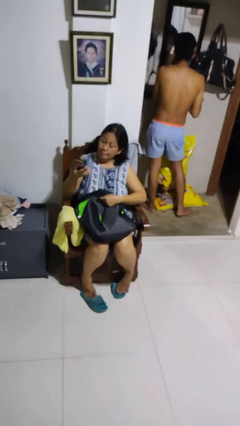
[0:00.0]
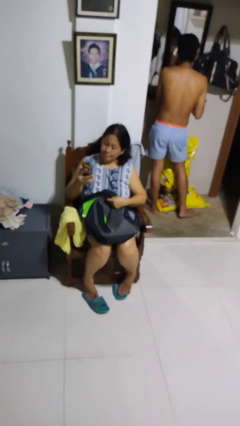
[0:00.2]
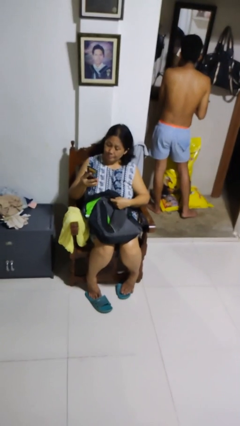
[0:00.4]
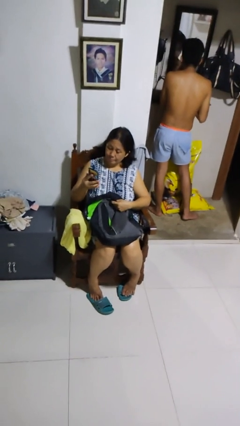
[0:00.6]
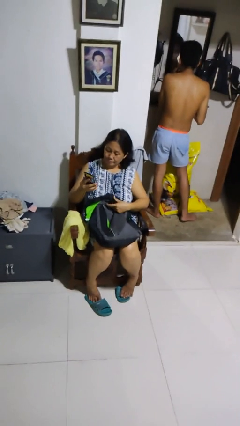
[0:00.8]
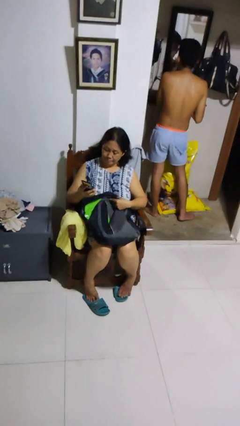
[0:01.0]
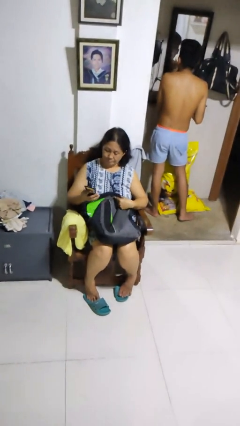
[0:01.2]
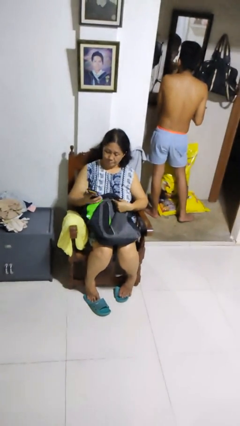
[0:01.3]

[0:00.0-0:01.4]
person takes object from backpack

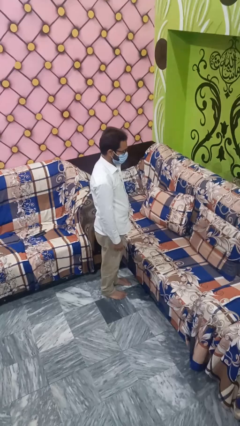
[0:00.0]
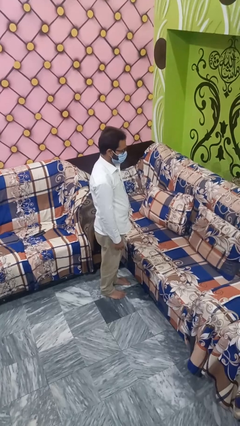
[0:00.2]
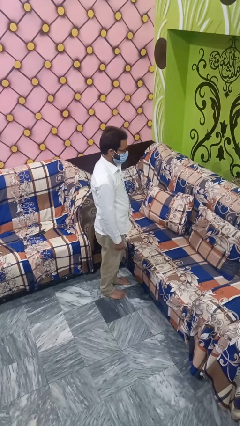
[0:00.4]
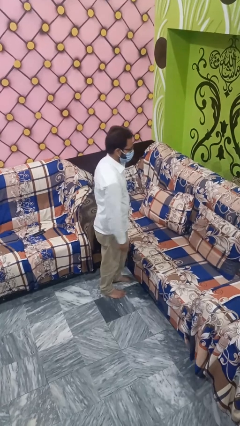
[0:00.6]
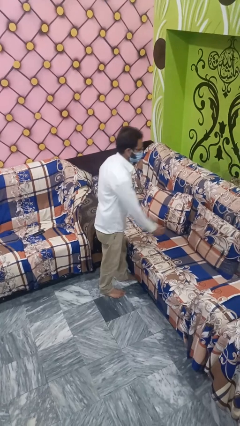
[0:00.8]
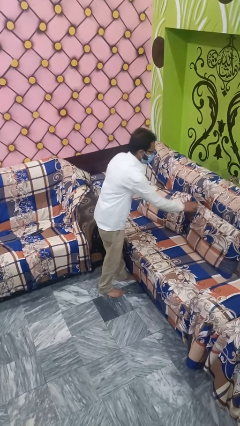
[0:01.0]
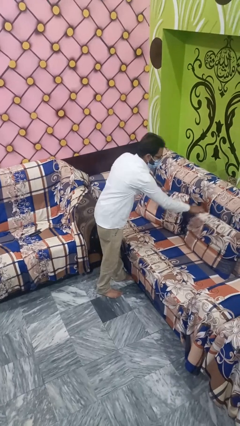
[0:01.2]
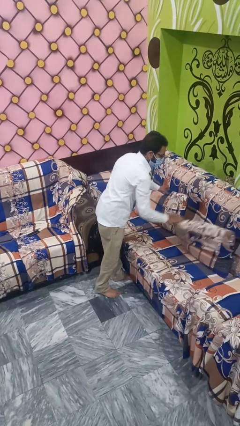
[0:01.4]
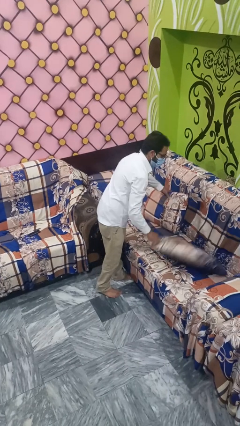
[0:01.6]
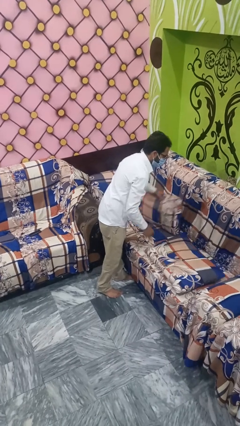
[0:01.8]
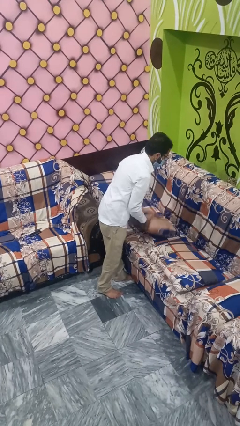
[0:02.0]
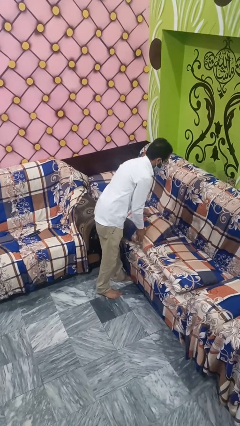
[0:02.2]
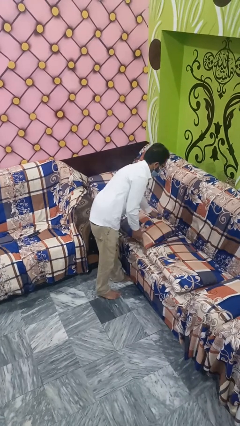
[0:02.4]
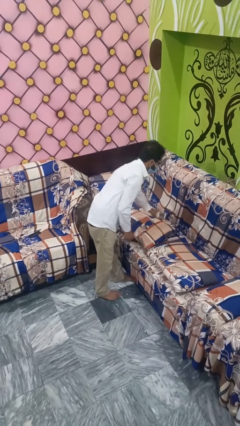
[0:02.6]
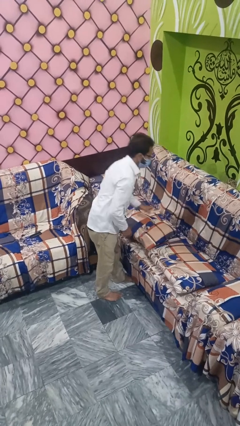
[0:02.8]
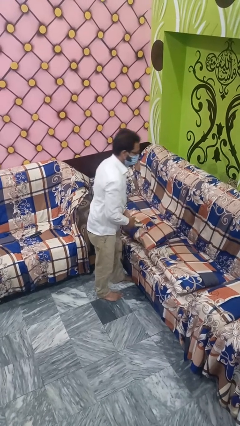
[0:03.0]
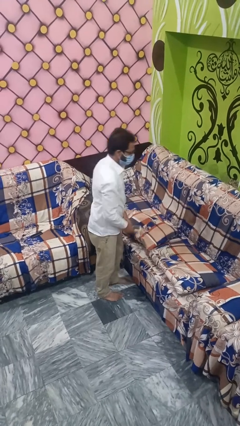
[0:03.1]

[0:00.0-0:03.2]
person searches in couch

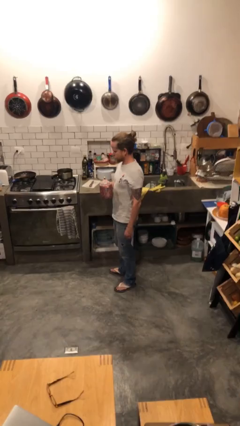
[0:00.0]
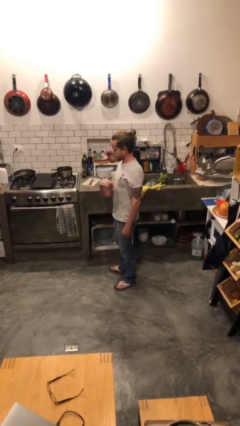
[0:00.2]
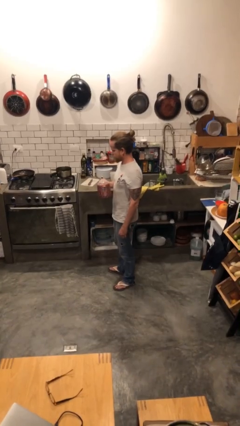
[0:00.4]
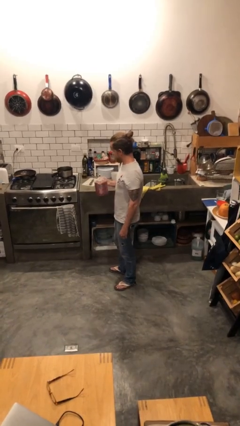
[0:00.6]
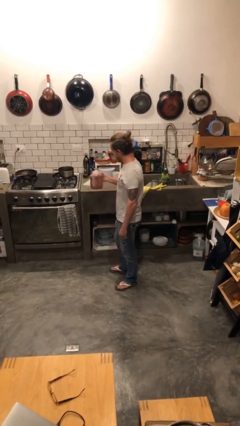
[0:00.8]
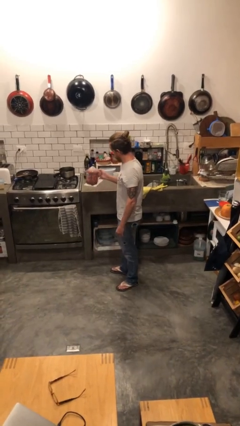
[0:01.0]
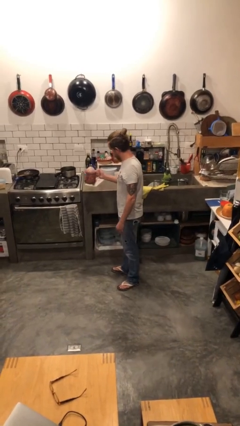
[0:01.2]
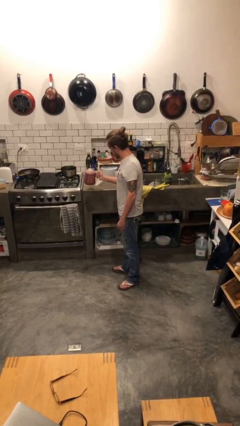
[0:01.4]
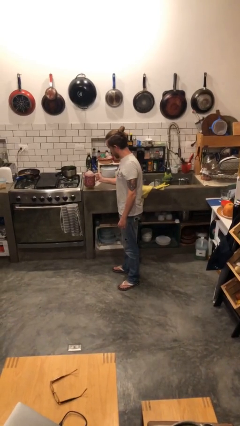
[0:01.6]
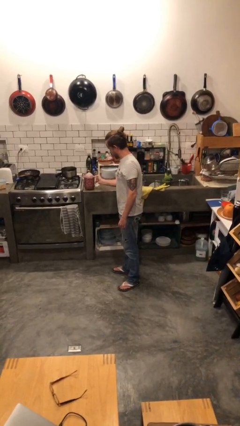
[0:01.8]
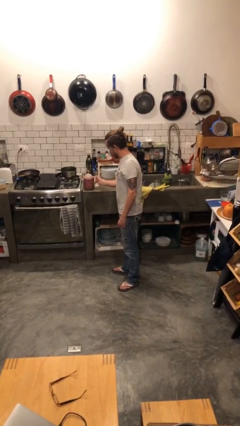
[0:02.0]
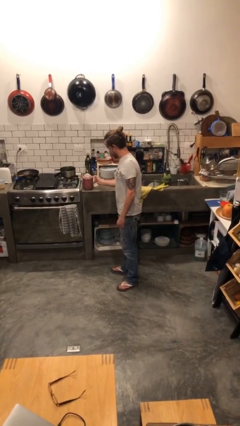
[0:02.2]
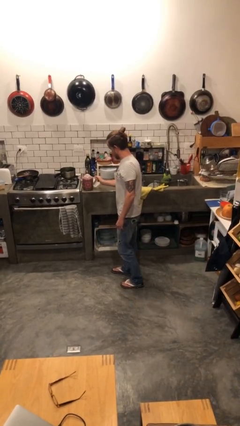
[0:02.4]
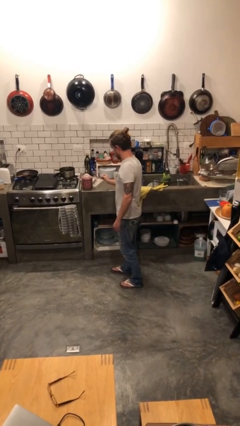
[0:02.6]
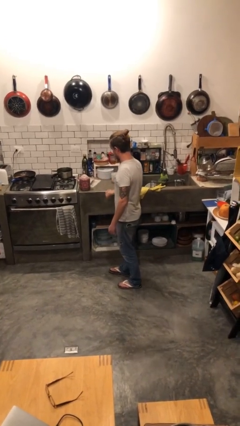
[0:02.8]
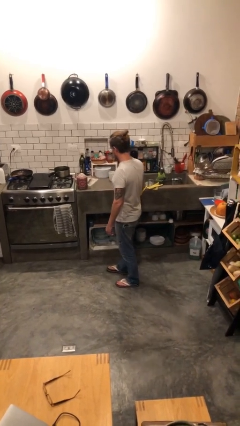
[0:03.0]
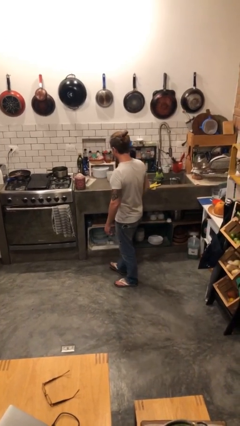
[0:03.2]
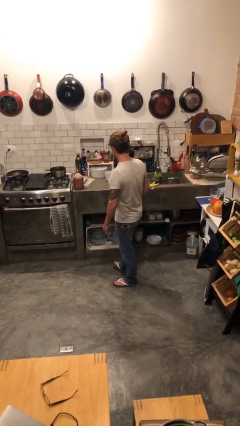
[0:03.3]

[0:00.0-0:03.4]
person puts down object on countertop

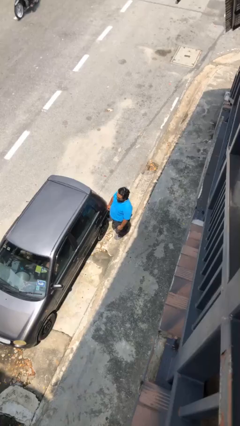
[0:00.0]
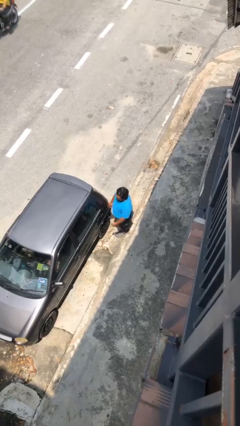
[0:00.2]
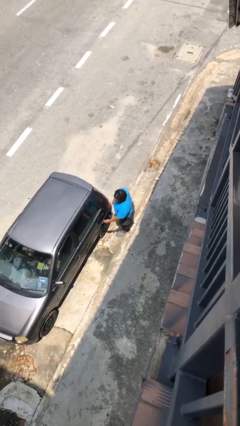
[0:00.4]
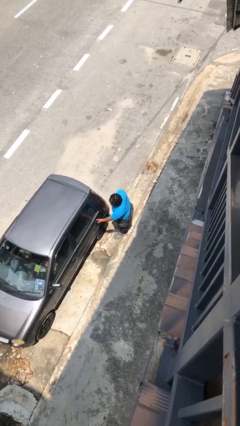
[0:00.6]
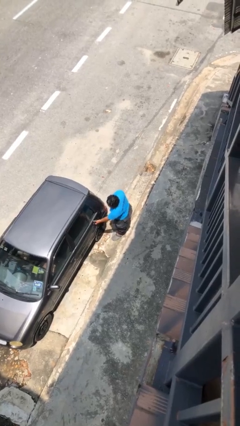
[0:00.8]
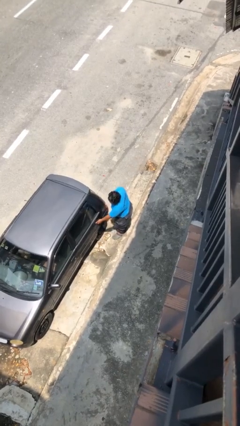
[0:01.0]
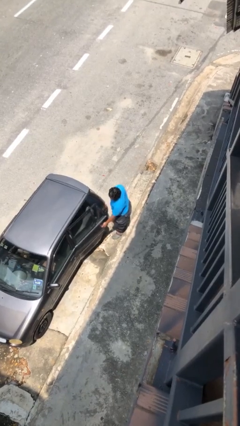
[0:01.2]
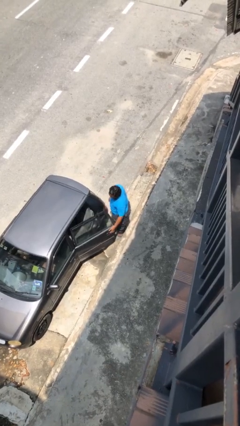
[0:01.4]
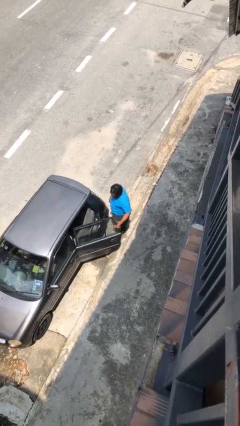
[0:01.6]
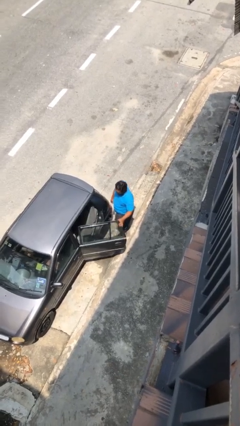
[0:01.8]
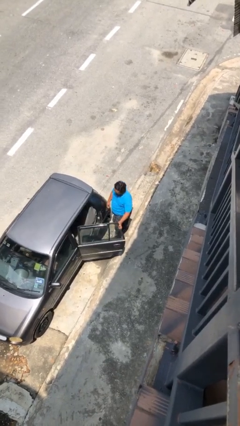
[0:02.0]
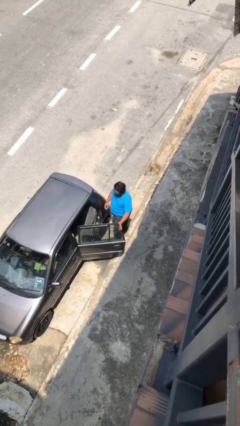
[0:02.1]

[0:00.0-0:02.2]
person opens car door

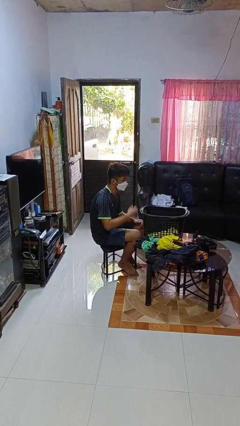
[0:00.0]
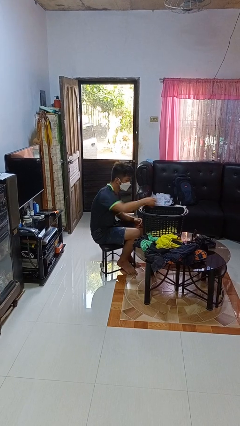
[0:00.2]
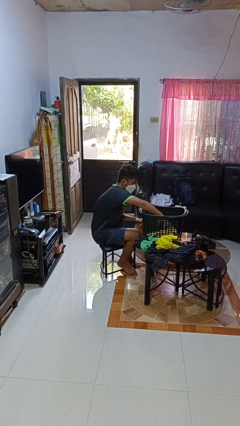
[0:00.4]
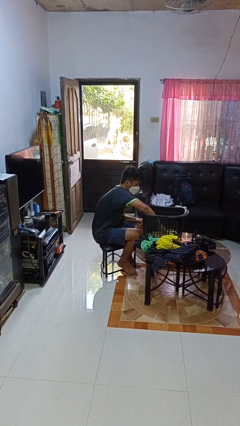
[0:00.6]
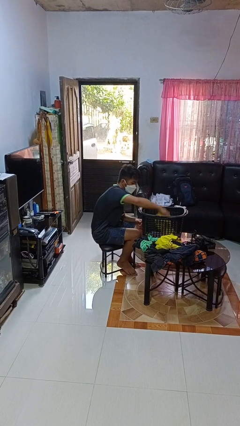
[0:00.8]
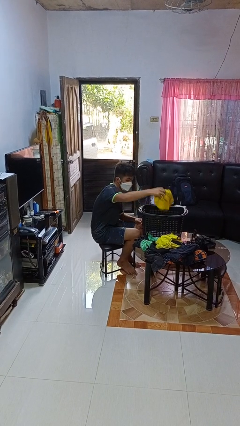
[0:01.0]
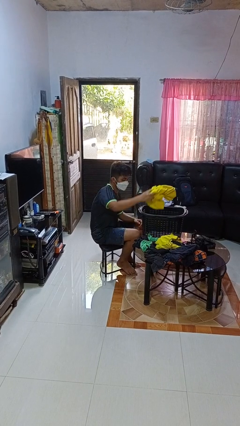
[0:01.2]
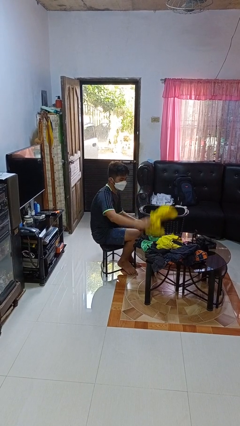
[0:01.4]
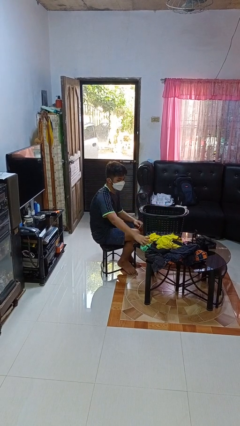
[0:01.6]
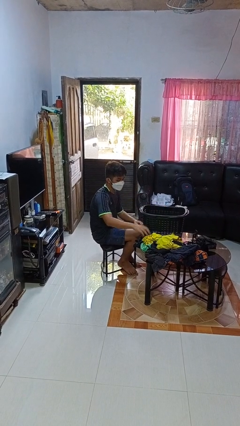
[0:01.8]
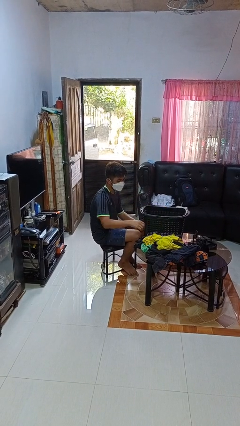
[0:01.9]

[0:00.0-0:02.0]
person takes object from basket

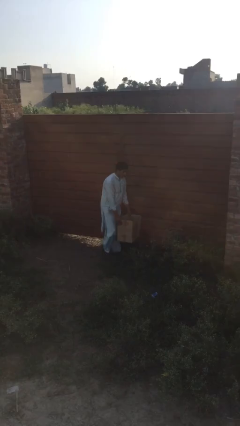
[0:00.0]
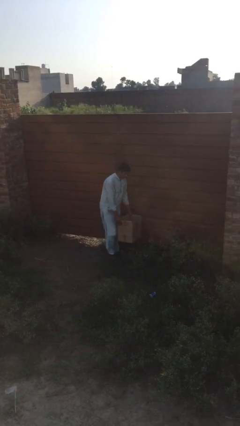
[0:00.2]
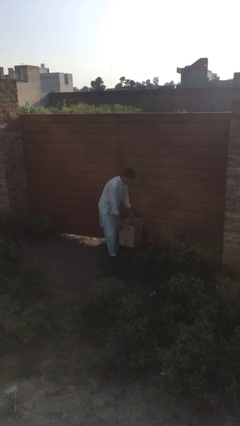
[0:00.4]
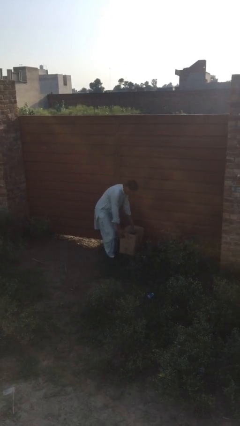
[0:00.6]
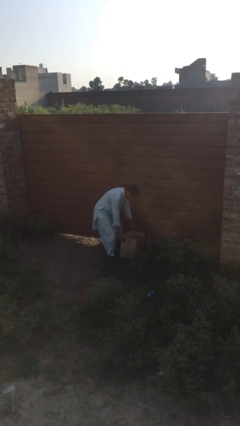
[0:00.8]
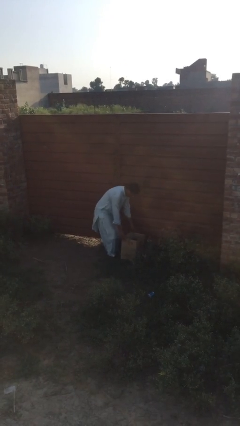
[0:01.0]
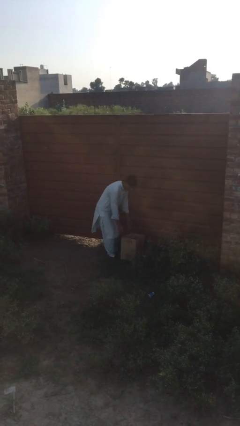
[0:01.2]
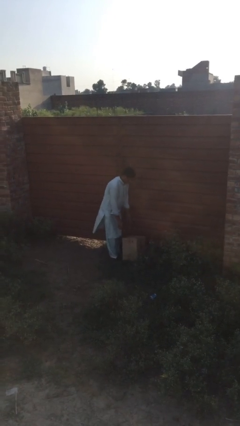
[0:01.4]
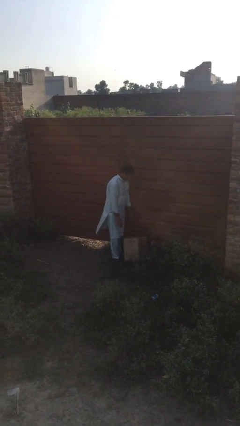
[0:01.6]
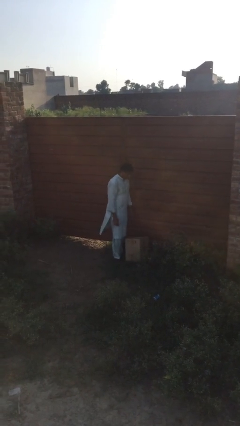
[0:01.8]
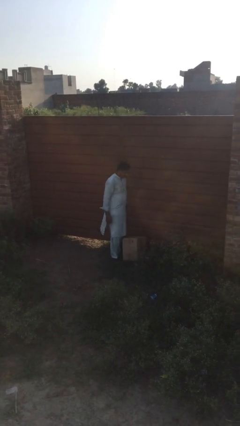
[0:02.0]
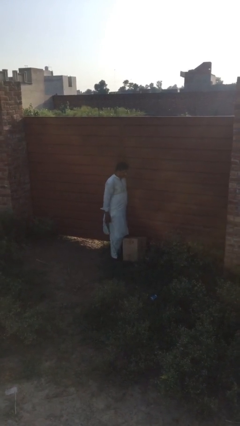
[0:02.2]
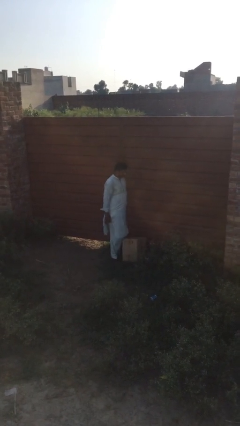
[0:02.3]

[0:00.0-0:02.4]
person puts down object on floor

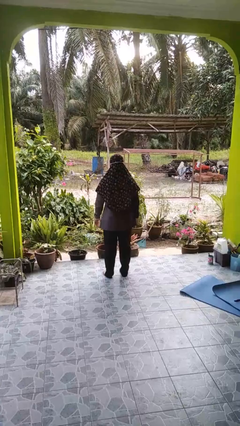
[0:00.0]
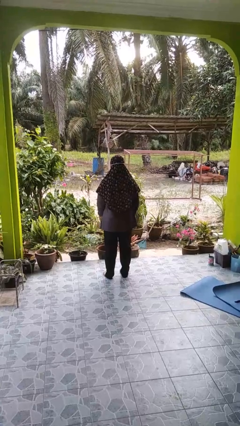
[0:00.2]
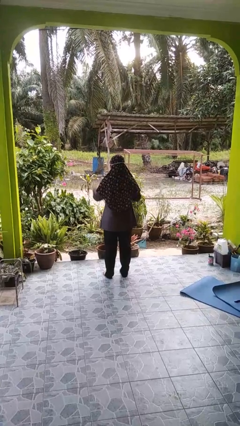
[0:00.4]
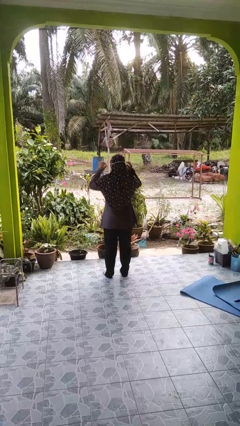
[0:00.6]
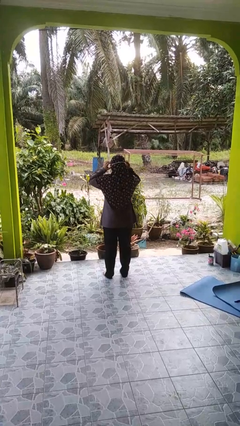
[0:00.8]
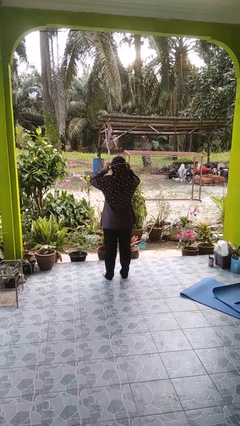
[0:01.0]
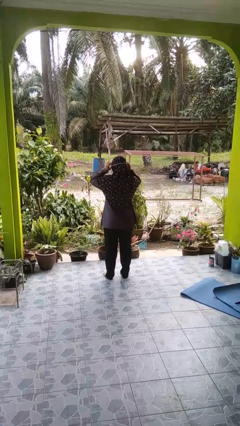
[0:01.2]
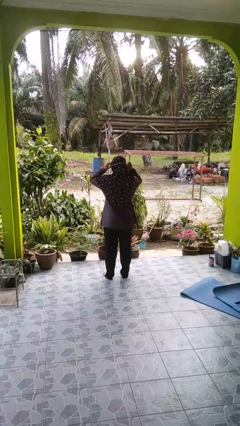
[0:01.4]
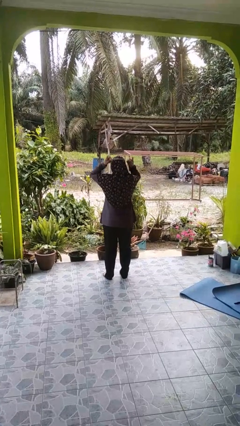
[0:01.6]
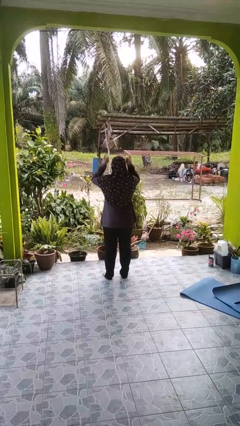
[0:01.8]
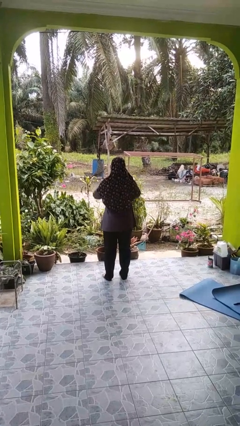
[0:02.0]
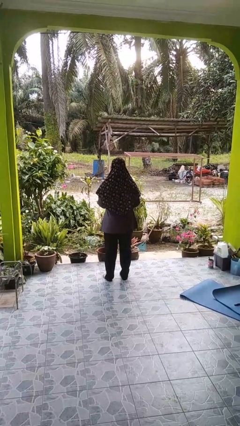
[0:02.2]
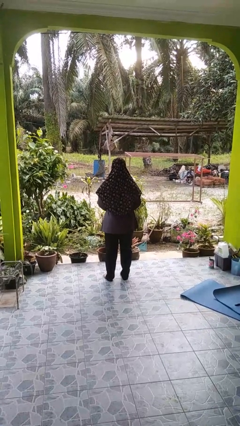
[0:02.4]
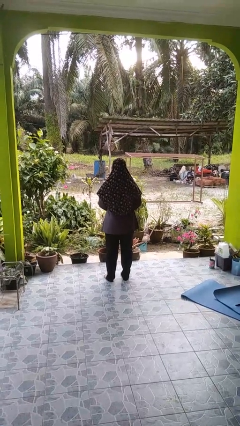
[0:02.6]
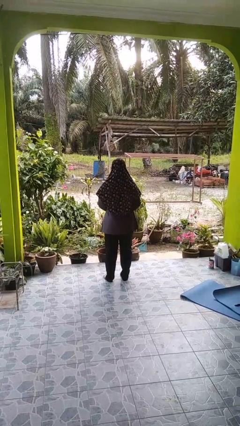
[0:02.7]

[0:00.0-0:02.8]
person takes off facemask
